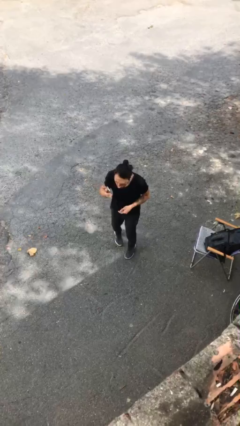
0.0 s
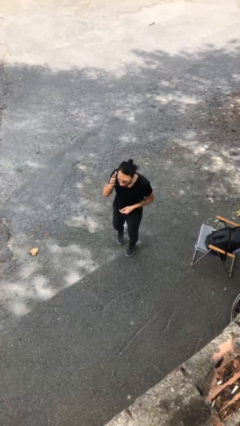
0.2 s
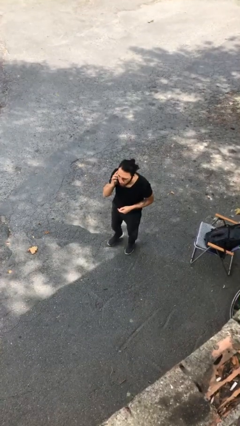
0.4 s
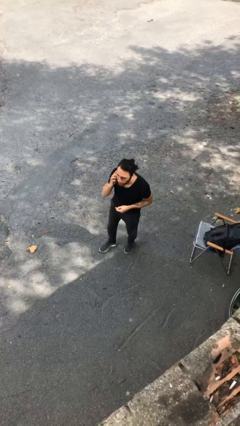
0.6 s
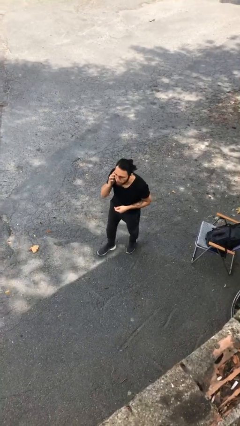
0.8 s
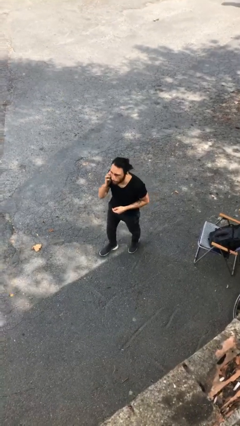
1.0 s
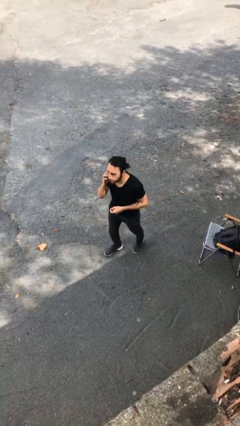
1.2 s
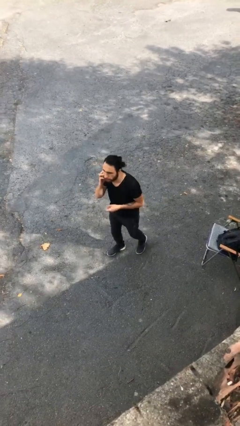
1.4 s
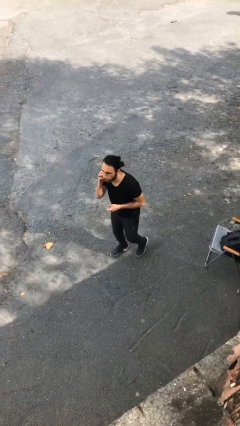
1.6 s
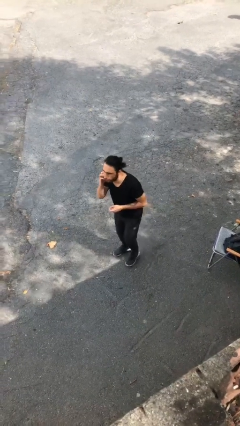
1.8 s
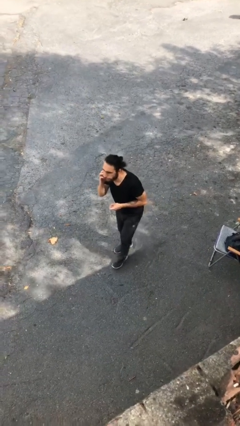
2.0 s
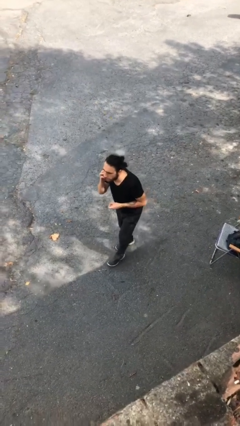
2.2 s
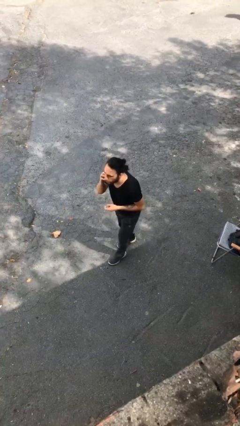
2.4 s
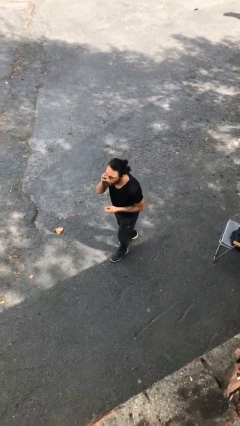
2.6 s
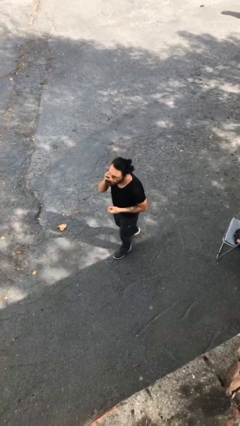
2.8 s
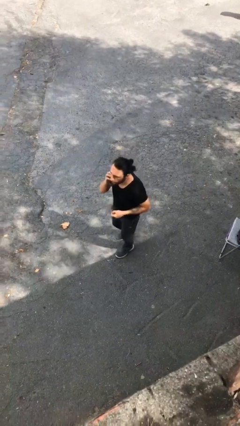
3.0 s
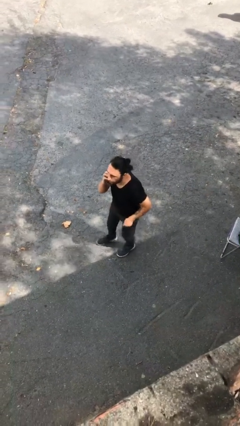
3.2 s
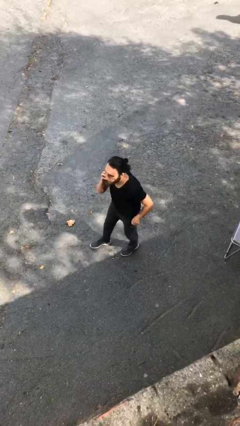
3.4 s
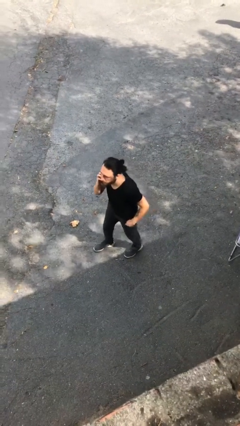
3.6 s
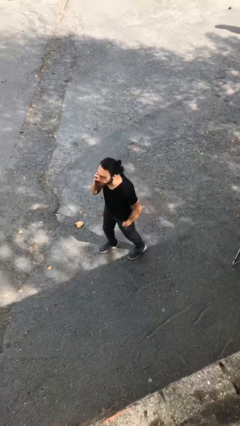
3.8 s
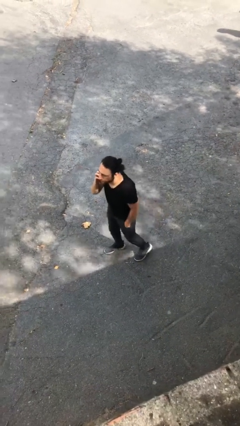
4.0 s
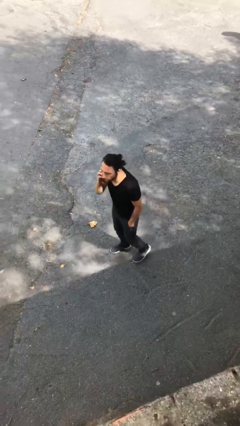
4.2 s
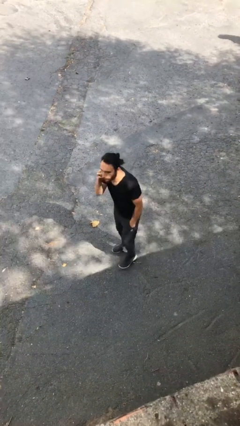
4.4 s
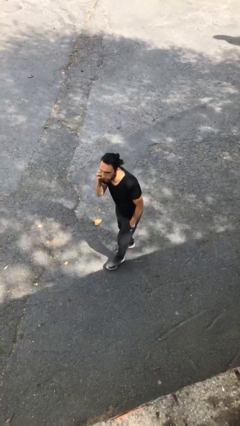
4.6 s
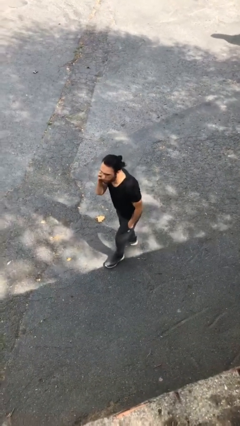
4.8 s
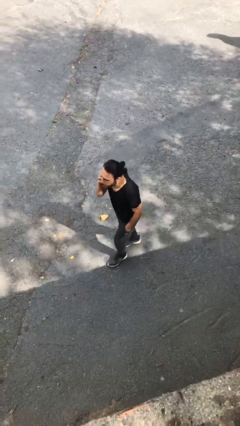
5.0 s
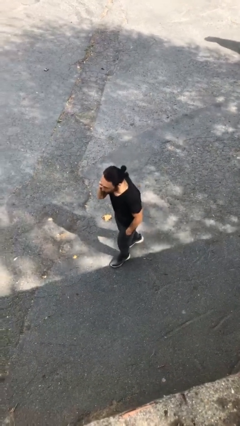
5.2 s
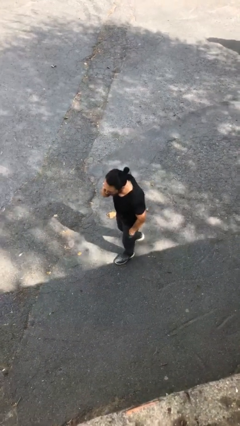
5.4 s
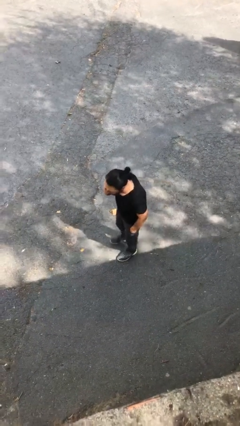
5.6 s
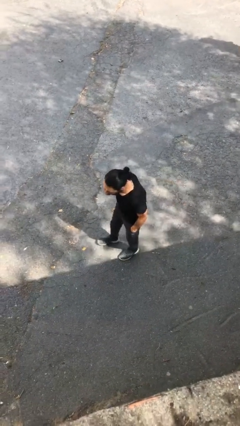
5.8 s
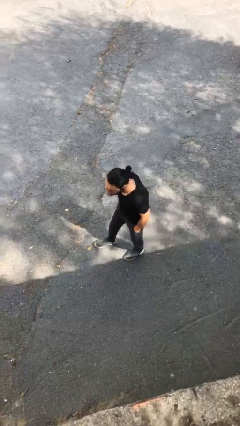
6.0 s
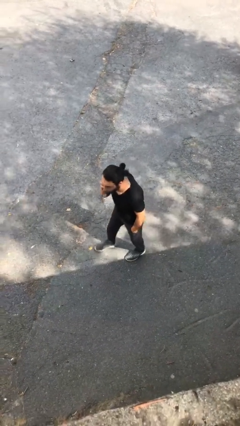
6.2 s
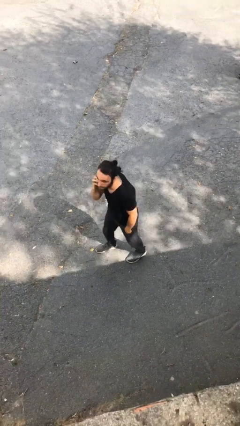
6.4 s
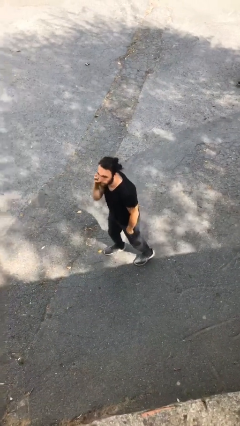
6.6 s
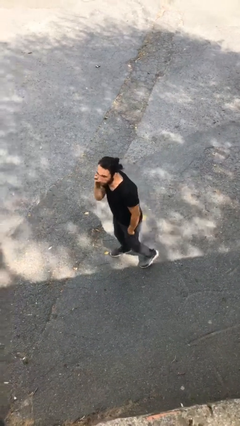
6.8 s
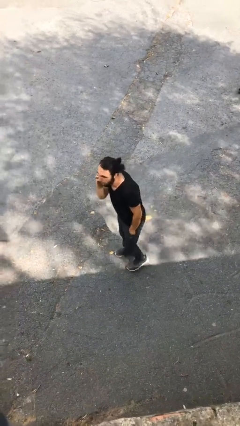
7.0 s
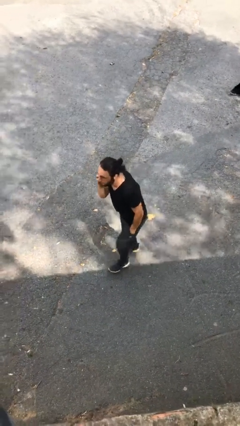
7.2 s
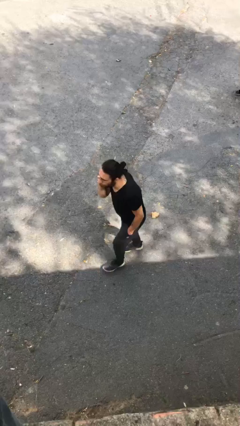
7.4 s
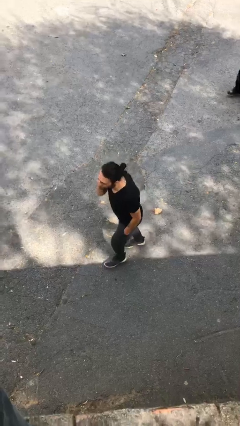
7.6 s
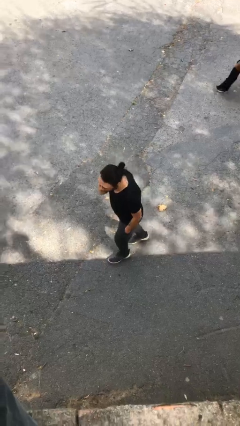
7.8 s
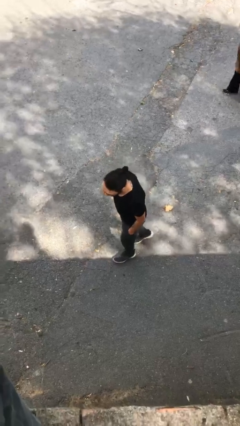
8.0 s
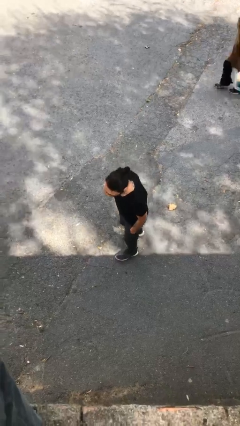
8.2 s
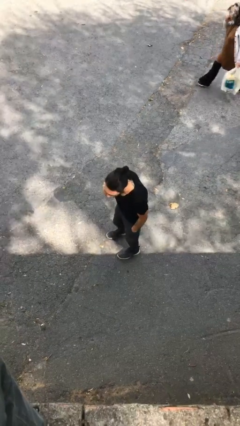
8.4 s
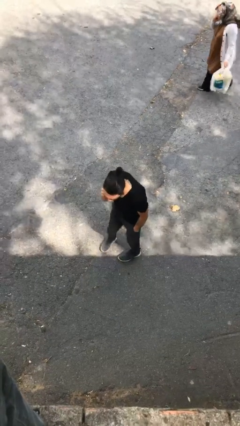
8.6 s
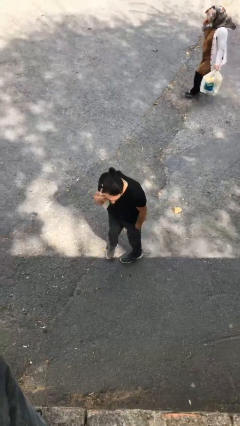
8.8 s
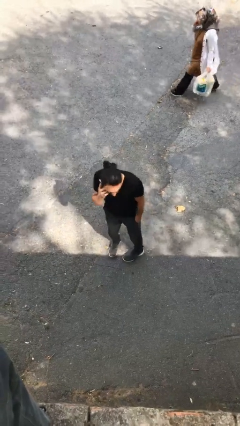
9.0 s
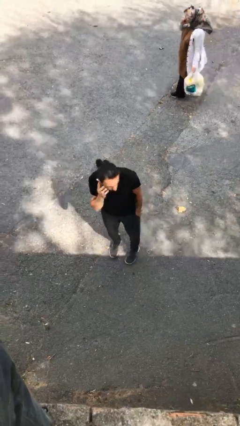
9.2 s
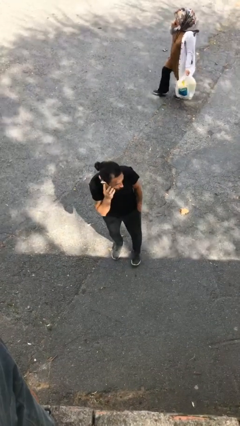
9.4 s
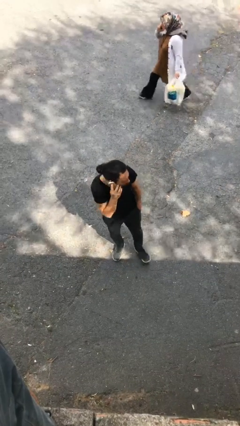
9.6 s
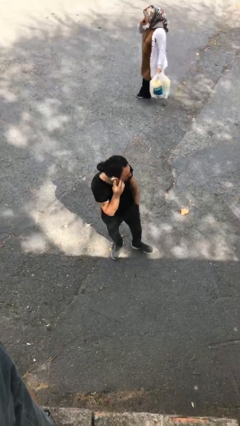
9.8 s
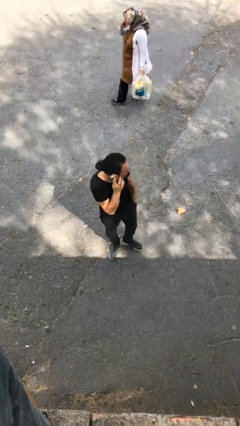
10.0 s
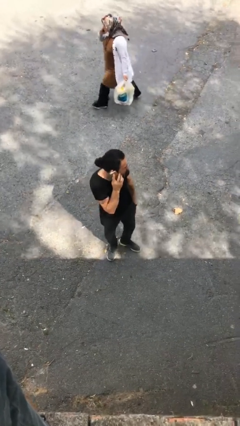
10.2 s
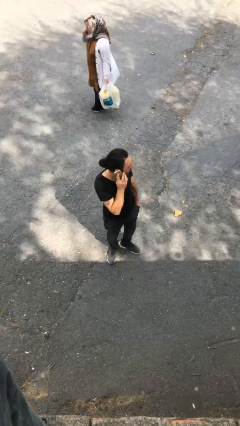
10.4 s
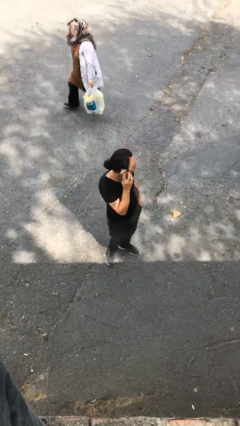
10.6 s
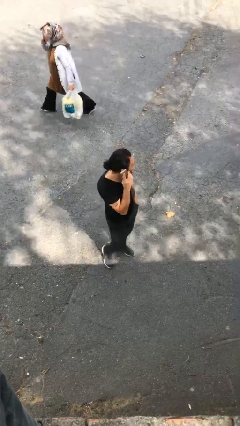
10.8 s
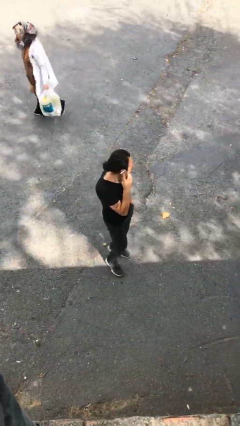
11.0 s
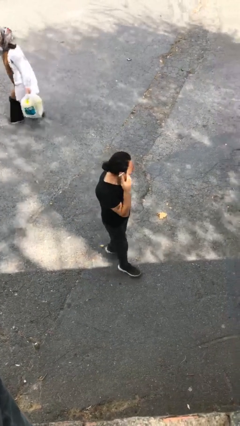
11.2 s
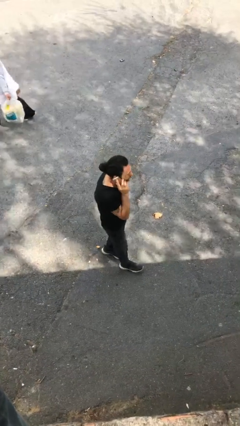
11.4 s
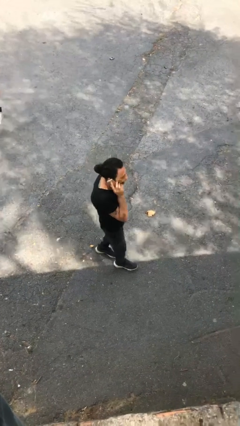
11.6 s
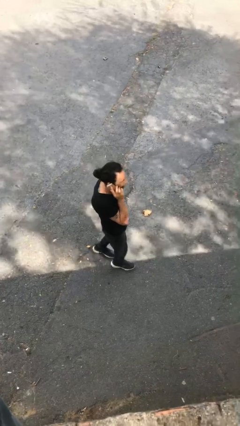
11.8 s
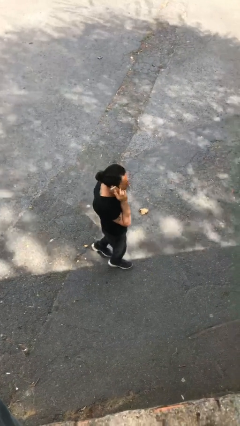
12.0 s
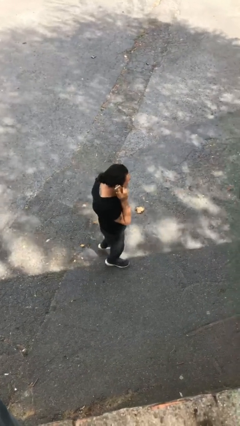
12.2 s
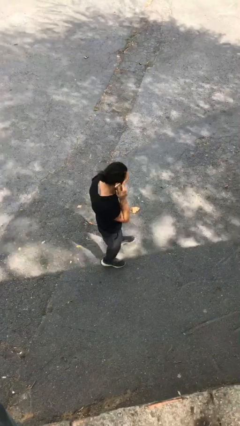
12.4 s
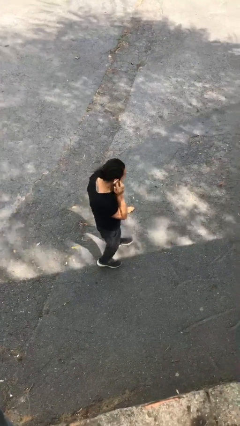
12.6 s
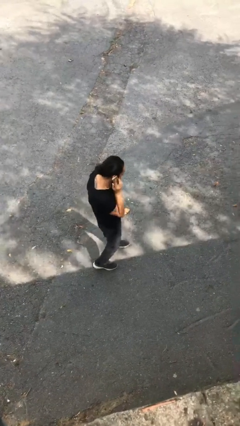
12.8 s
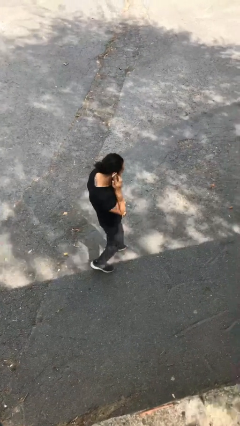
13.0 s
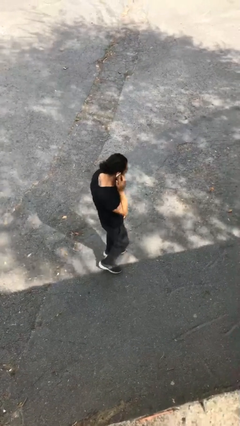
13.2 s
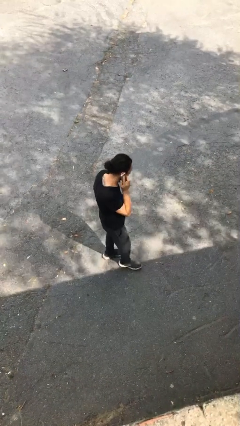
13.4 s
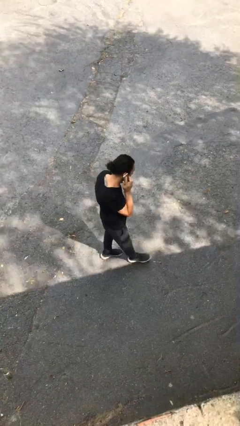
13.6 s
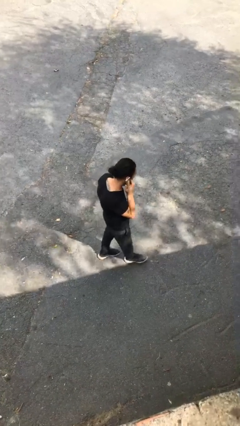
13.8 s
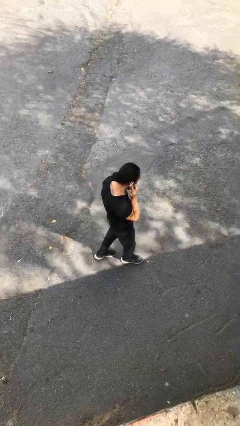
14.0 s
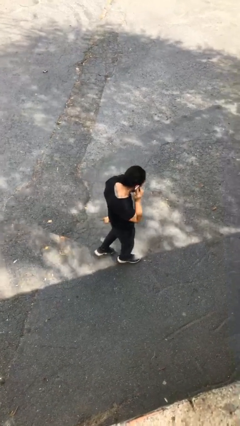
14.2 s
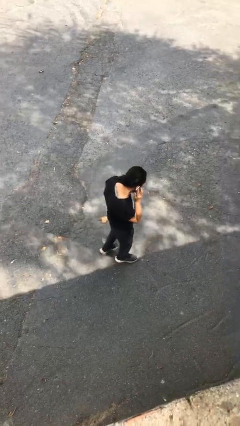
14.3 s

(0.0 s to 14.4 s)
person talks on phone

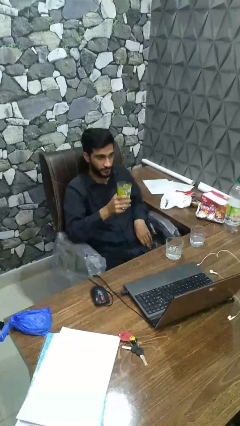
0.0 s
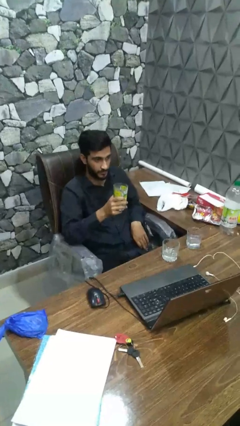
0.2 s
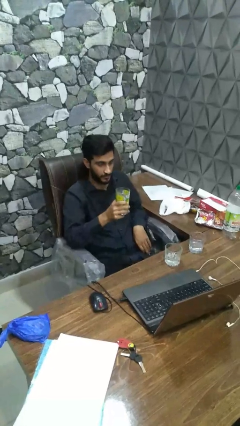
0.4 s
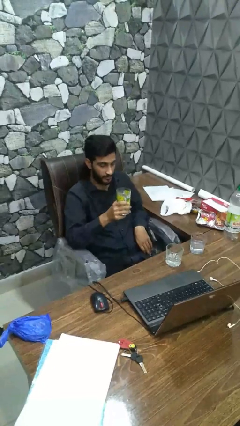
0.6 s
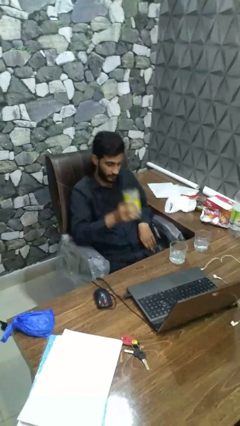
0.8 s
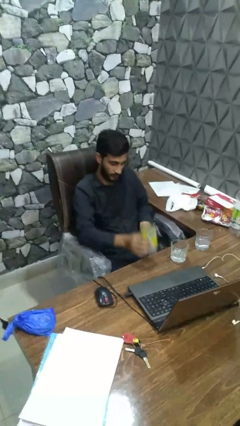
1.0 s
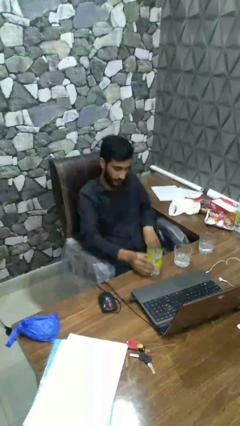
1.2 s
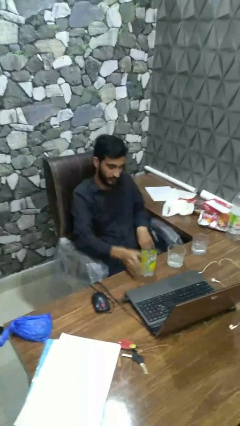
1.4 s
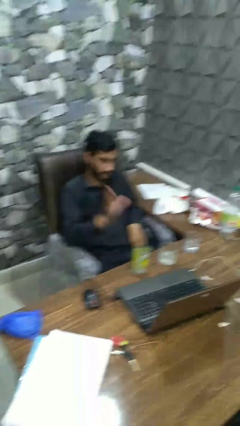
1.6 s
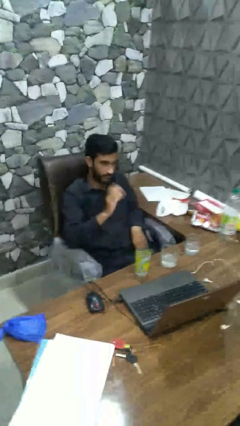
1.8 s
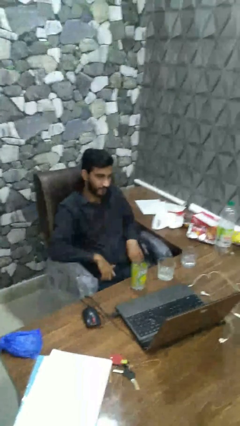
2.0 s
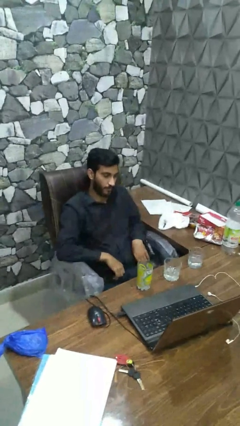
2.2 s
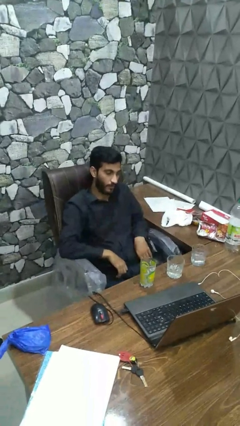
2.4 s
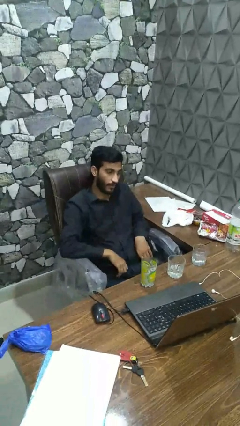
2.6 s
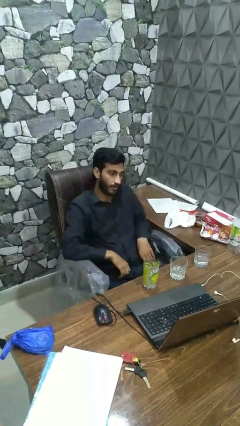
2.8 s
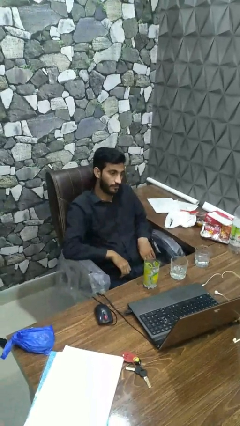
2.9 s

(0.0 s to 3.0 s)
person puts down object on table

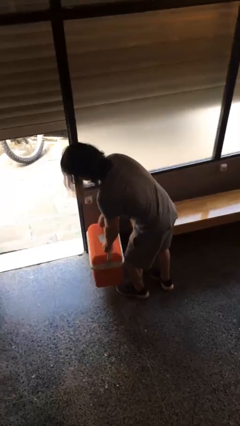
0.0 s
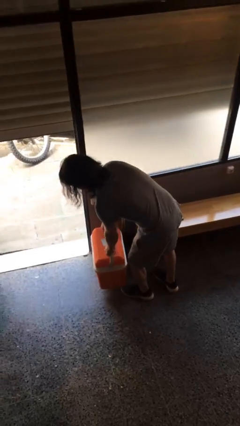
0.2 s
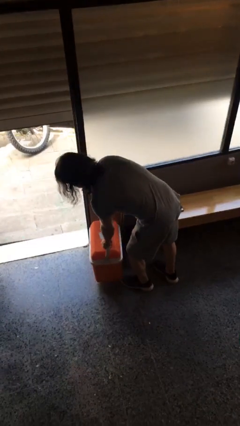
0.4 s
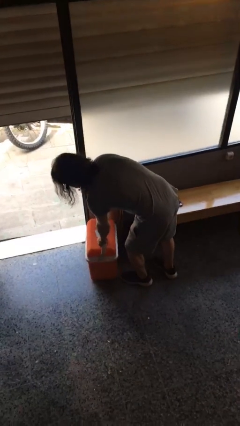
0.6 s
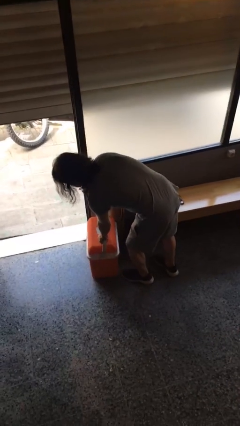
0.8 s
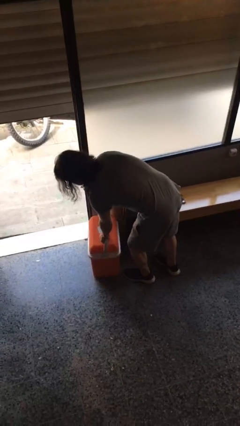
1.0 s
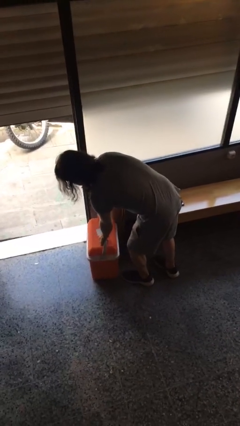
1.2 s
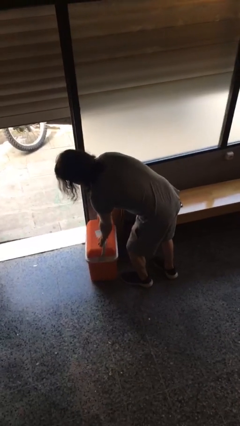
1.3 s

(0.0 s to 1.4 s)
person puts down object on floor
